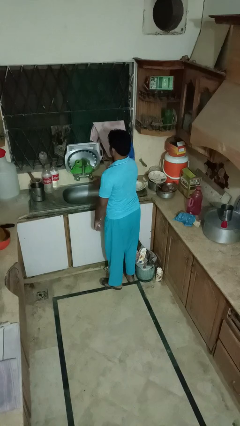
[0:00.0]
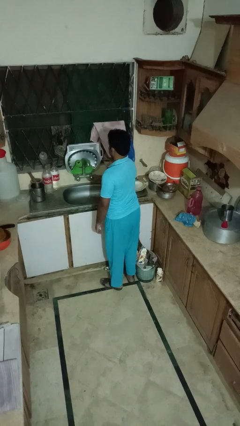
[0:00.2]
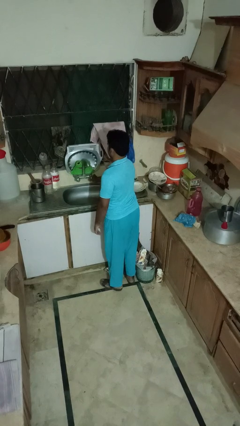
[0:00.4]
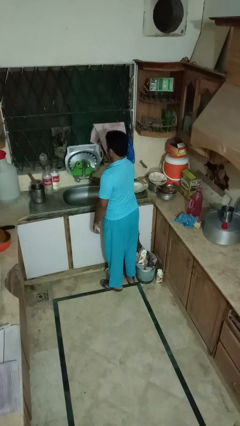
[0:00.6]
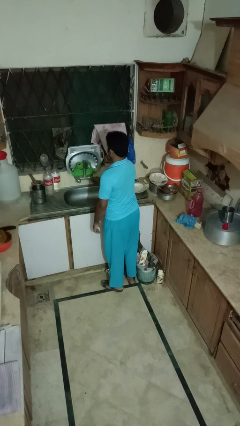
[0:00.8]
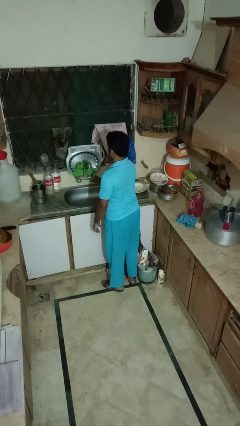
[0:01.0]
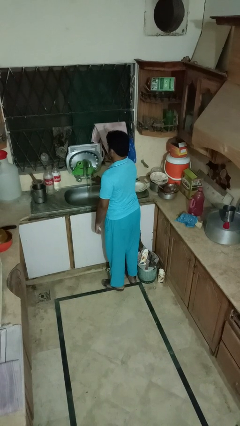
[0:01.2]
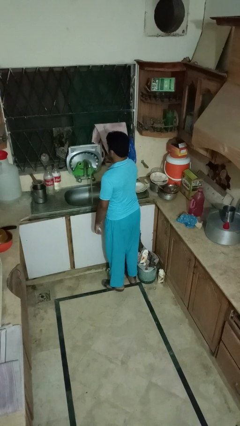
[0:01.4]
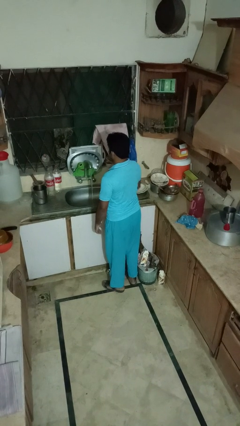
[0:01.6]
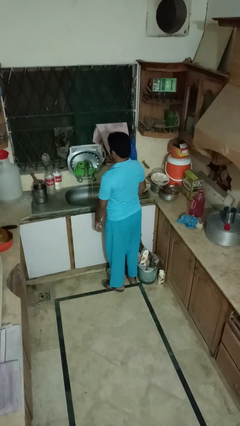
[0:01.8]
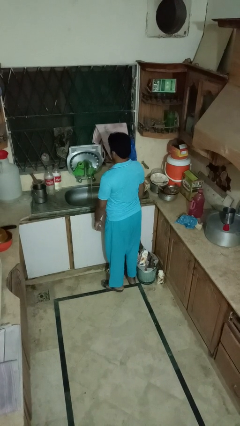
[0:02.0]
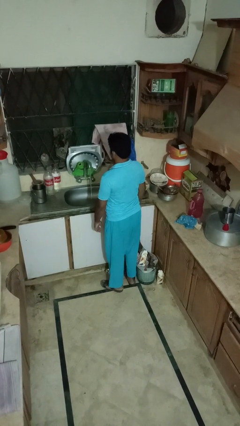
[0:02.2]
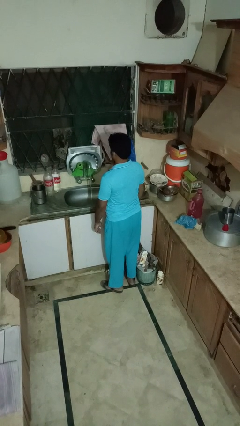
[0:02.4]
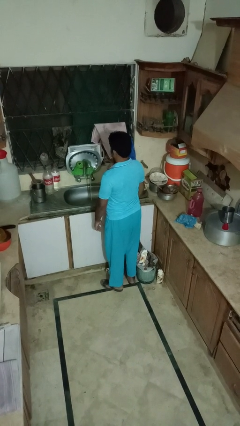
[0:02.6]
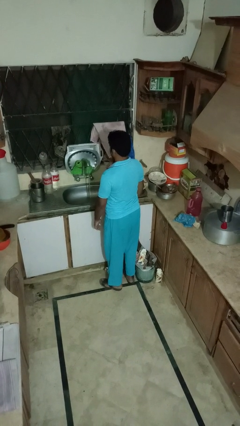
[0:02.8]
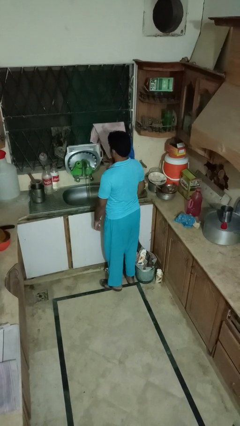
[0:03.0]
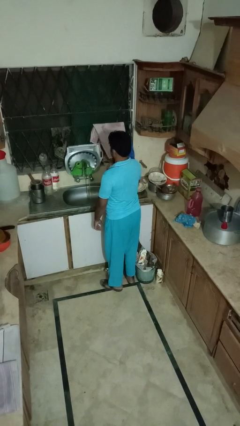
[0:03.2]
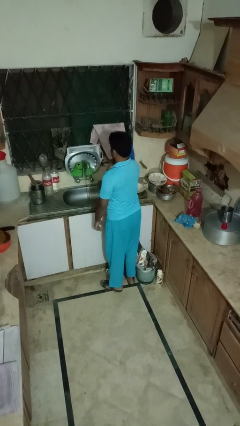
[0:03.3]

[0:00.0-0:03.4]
person turns on faucet

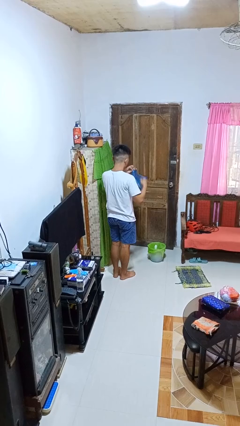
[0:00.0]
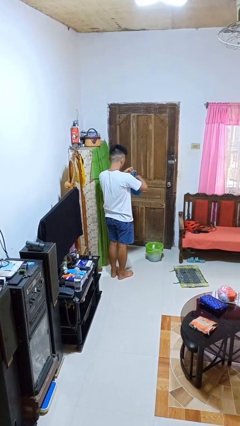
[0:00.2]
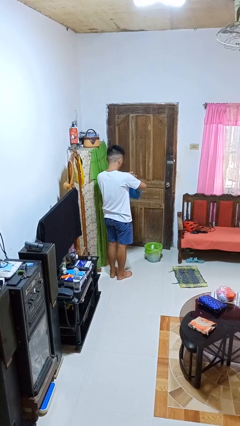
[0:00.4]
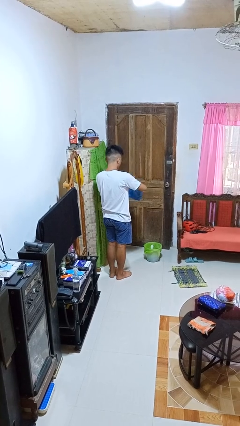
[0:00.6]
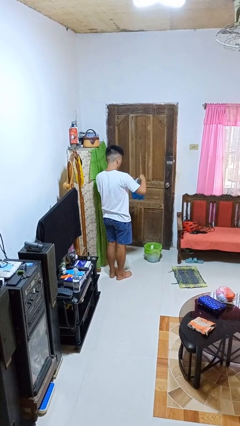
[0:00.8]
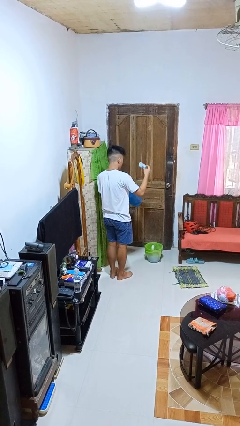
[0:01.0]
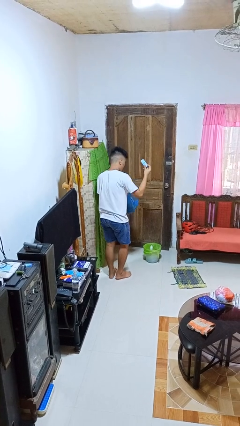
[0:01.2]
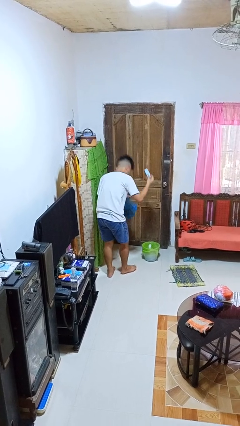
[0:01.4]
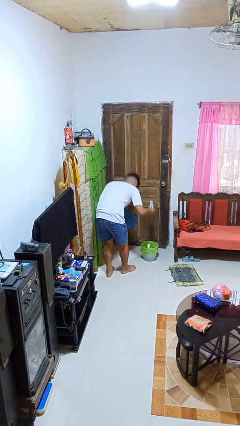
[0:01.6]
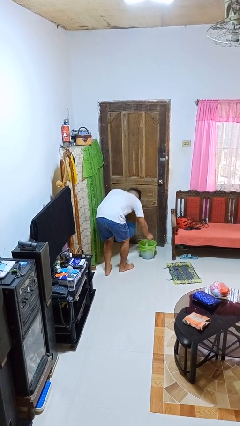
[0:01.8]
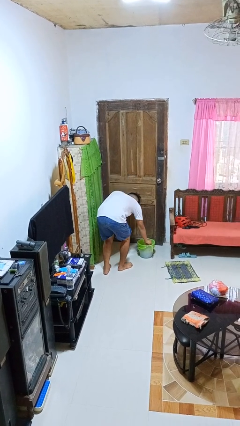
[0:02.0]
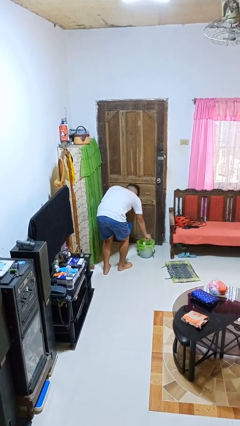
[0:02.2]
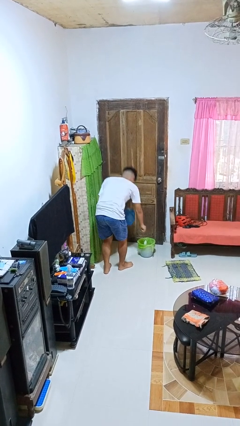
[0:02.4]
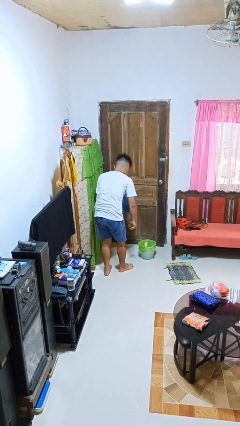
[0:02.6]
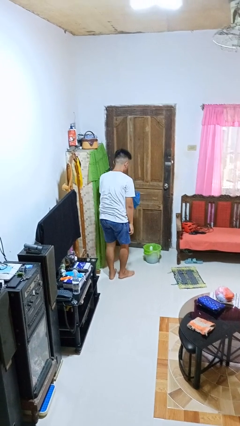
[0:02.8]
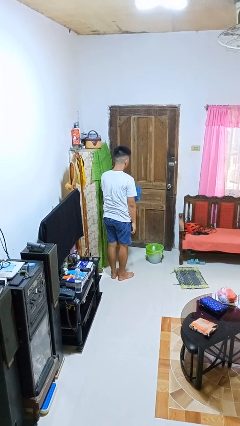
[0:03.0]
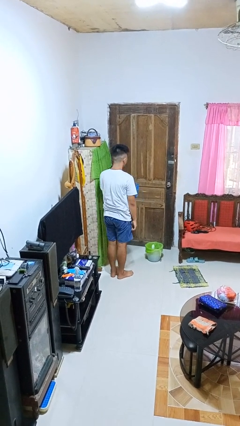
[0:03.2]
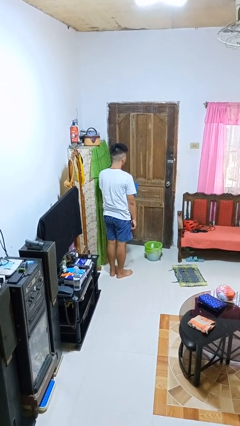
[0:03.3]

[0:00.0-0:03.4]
person discards trash

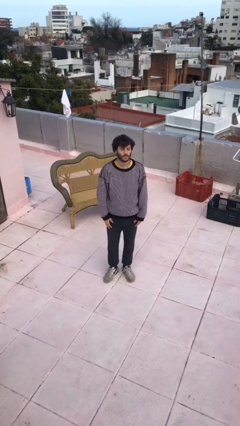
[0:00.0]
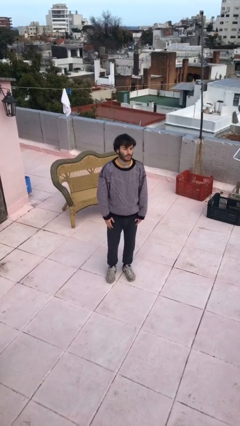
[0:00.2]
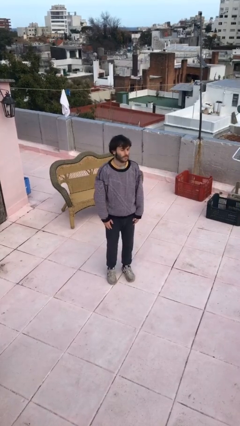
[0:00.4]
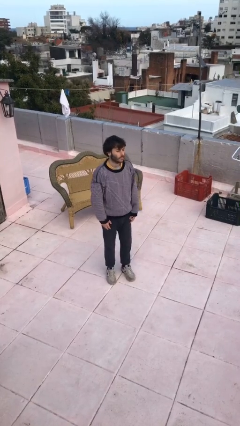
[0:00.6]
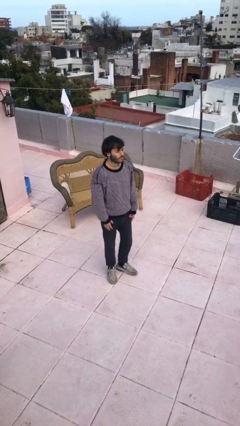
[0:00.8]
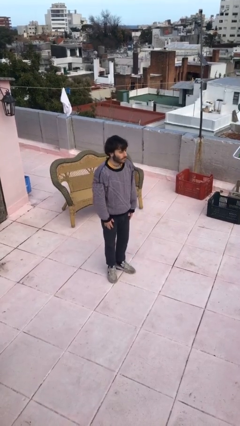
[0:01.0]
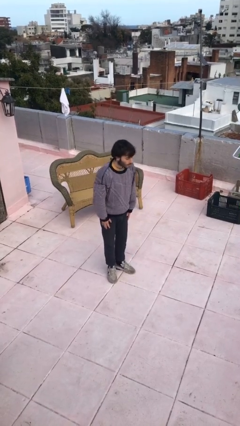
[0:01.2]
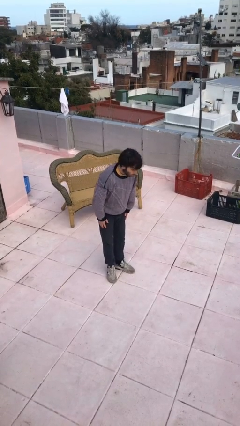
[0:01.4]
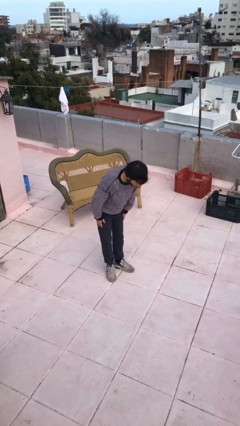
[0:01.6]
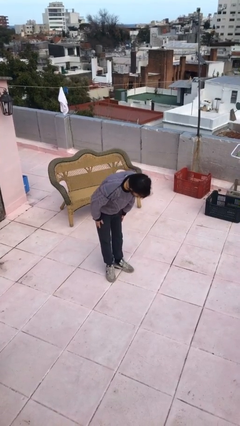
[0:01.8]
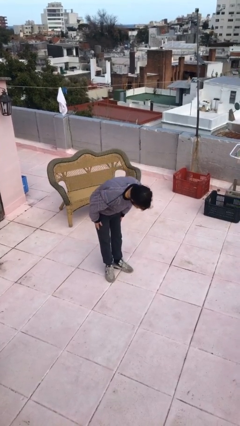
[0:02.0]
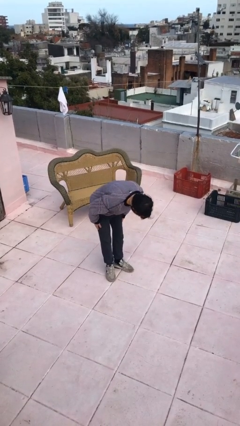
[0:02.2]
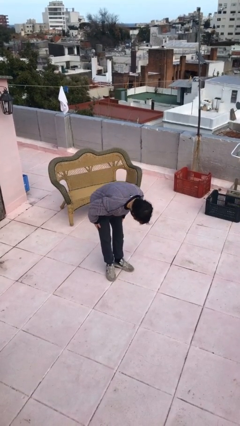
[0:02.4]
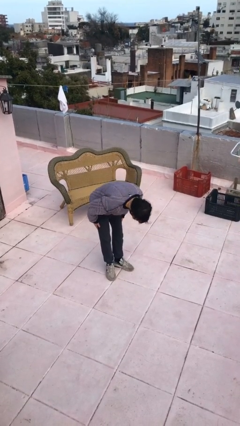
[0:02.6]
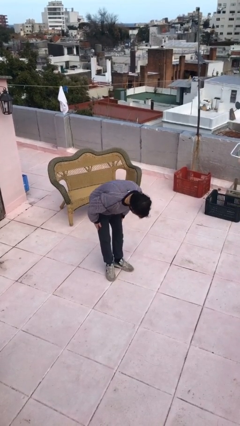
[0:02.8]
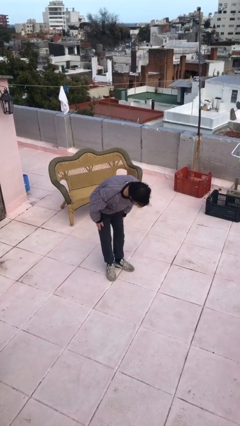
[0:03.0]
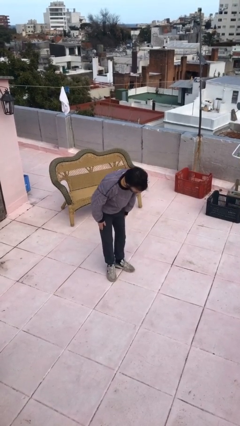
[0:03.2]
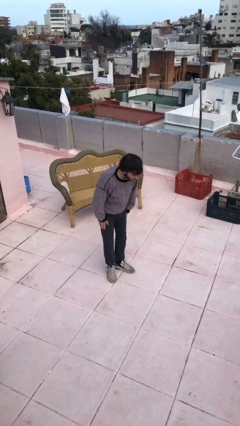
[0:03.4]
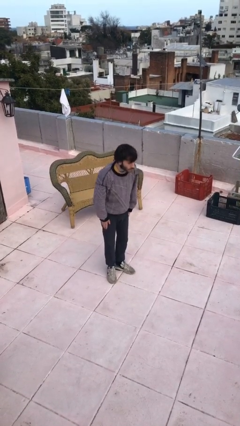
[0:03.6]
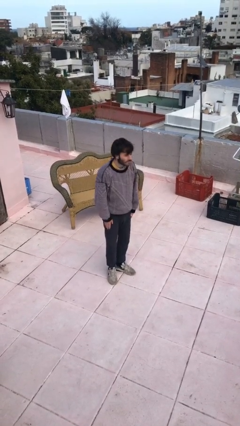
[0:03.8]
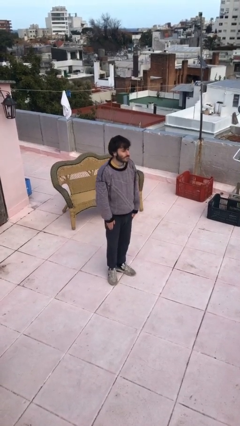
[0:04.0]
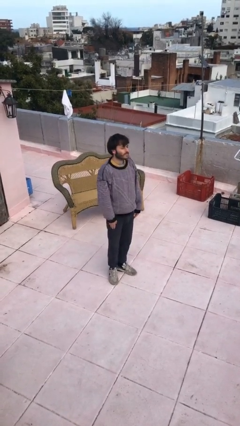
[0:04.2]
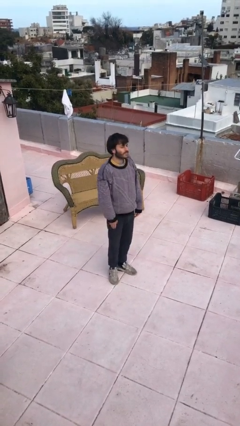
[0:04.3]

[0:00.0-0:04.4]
person bows

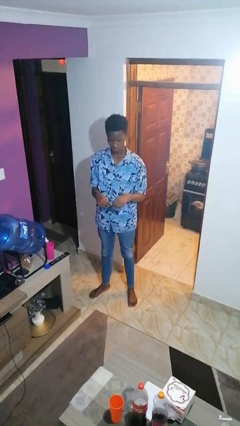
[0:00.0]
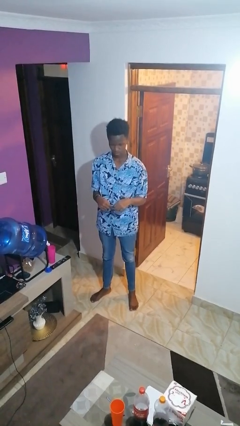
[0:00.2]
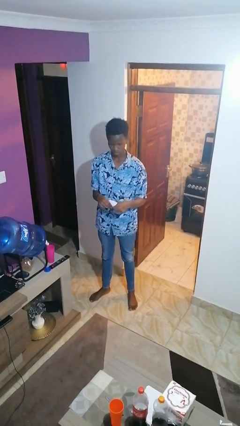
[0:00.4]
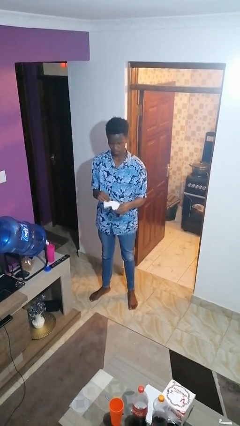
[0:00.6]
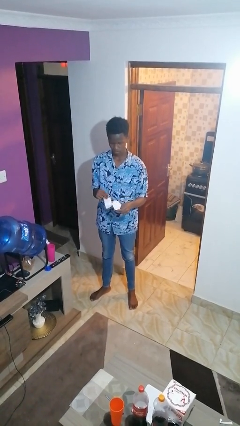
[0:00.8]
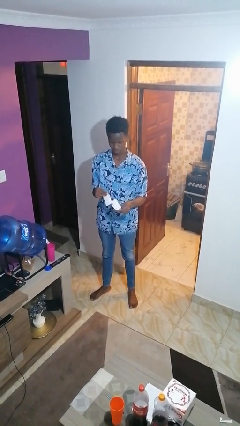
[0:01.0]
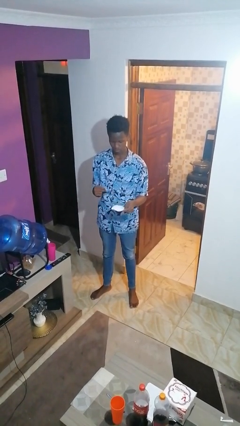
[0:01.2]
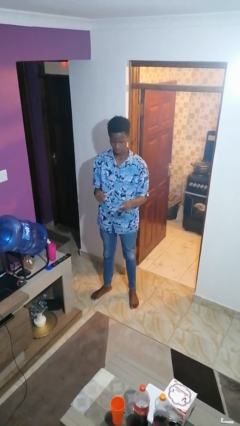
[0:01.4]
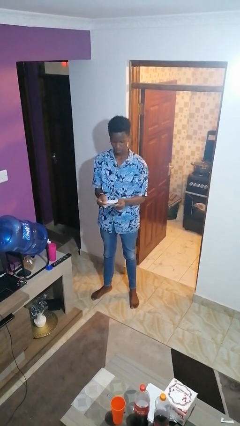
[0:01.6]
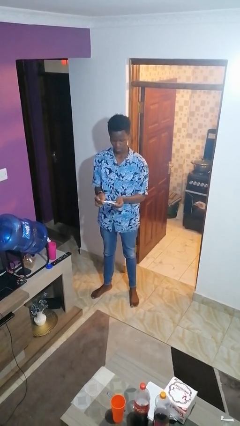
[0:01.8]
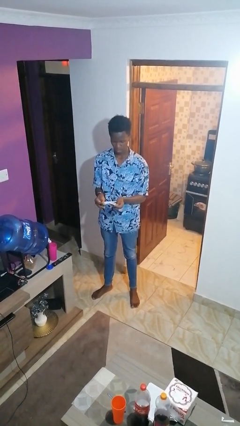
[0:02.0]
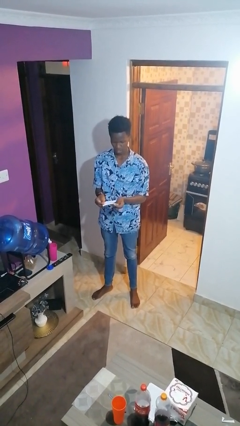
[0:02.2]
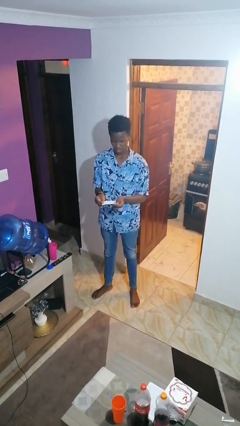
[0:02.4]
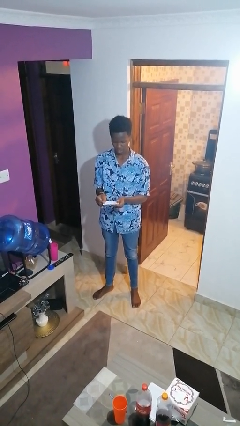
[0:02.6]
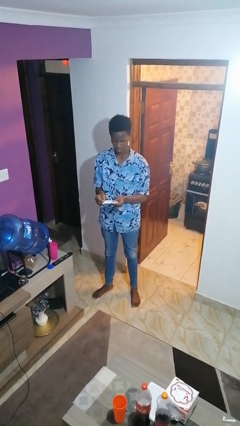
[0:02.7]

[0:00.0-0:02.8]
person tears paper

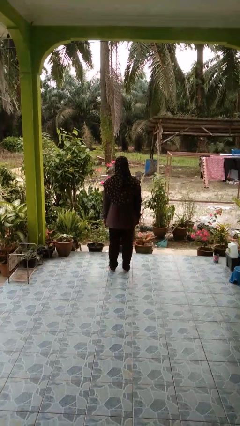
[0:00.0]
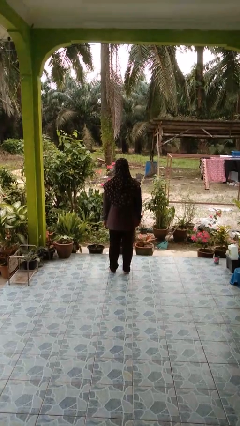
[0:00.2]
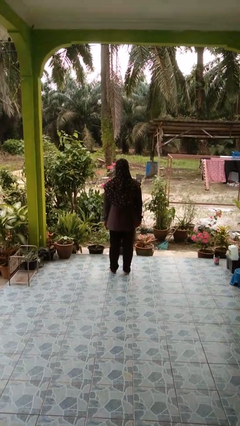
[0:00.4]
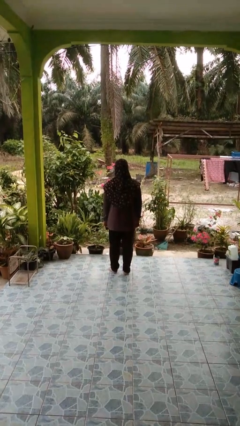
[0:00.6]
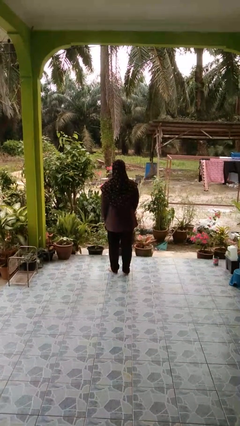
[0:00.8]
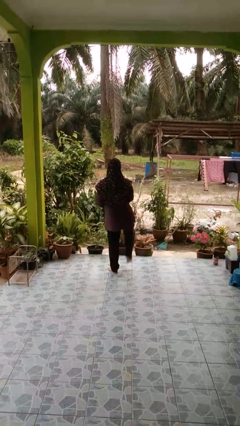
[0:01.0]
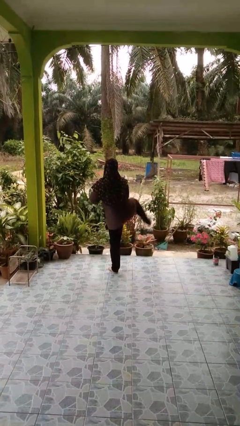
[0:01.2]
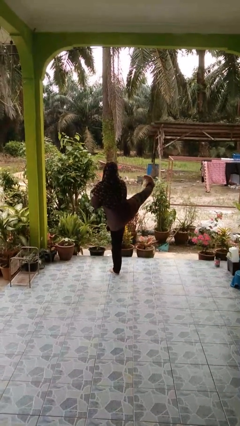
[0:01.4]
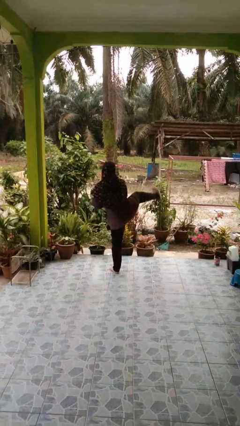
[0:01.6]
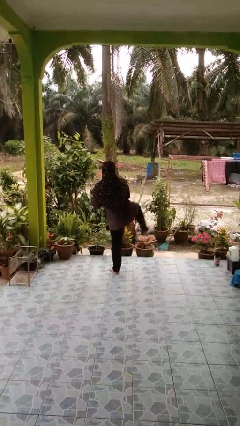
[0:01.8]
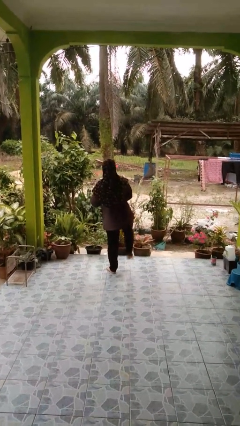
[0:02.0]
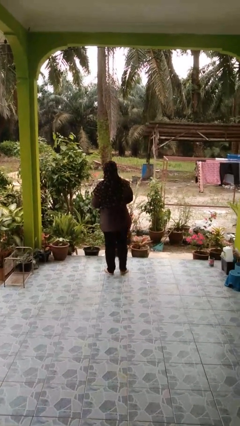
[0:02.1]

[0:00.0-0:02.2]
person karate kicks

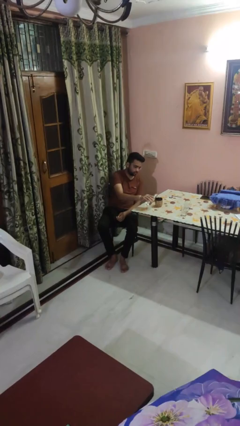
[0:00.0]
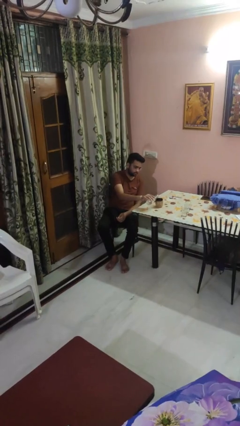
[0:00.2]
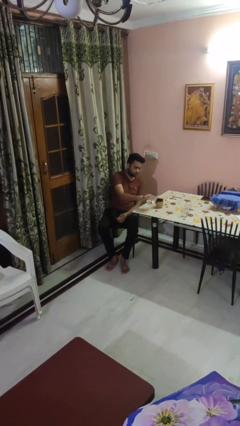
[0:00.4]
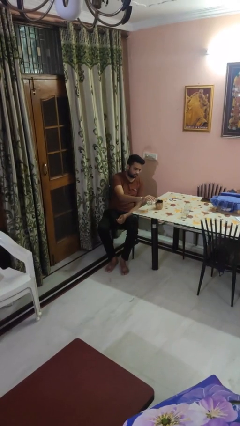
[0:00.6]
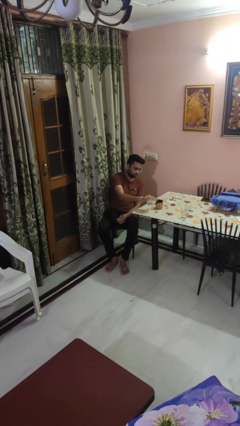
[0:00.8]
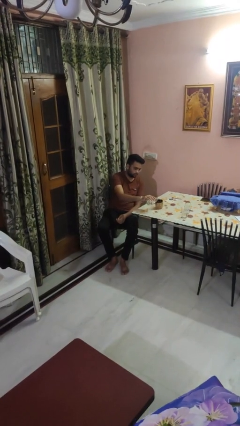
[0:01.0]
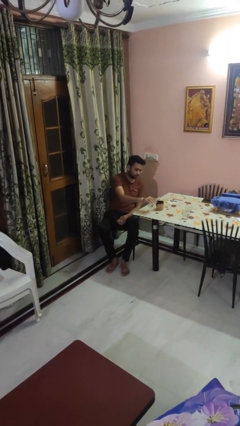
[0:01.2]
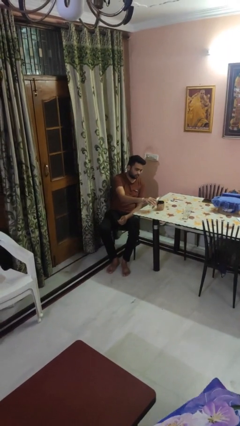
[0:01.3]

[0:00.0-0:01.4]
person pours liquid into cup
